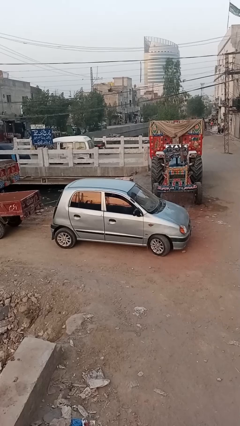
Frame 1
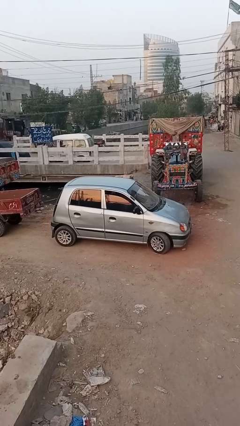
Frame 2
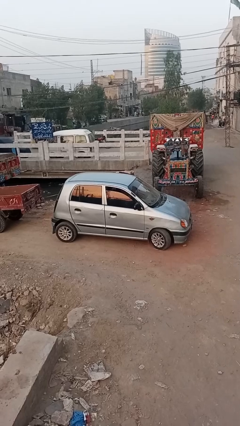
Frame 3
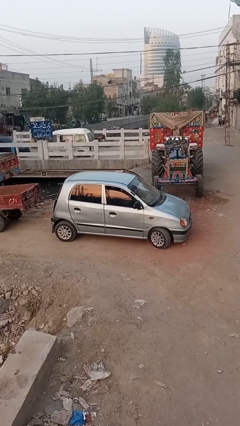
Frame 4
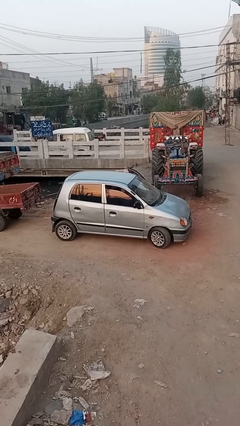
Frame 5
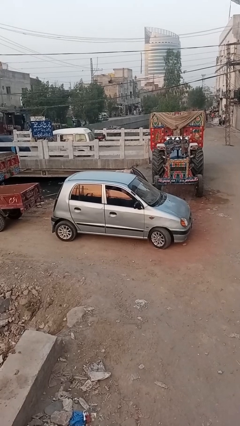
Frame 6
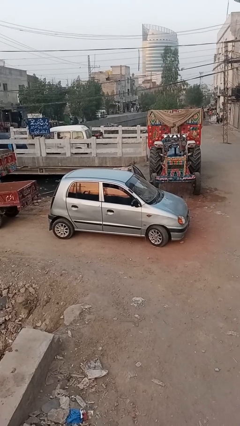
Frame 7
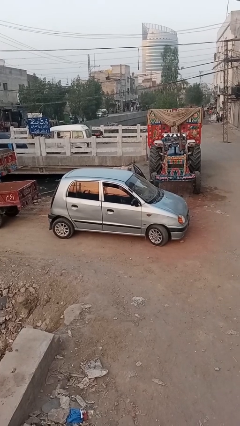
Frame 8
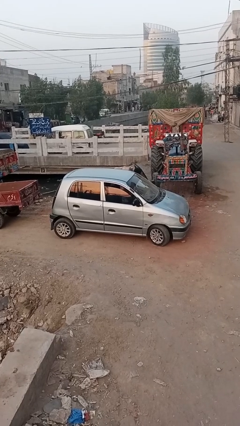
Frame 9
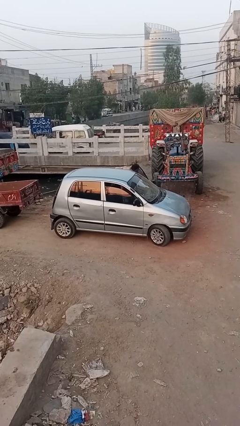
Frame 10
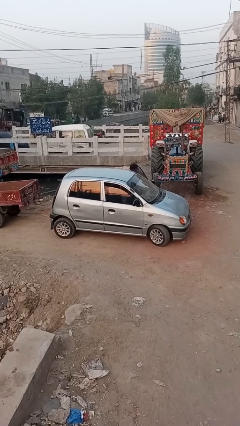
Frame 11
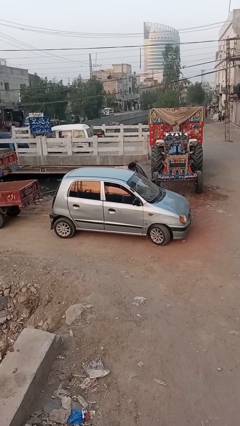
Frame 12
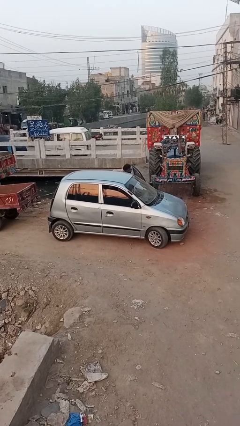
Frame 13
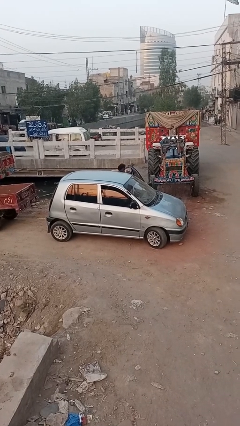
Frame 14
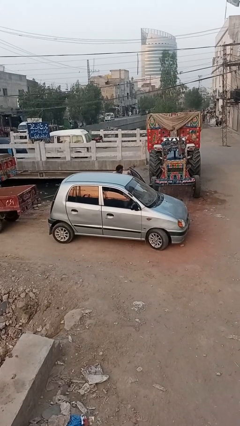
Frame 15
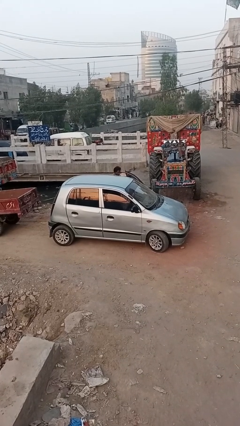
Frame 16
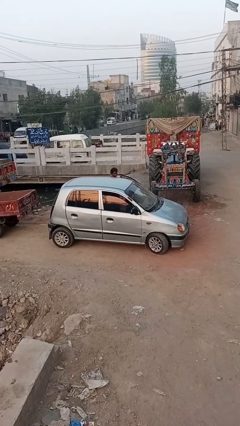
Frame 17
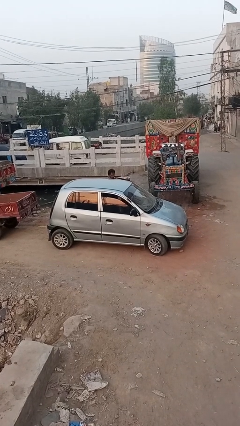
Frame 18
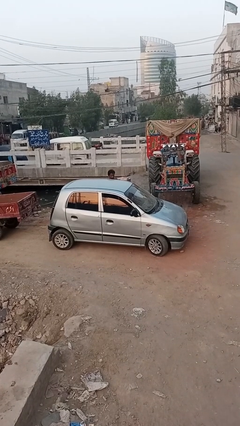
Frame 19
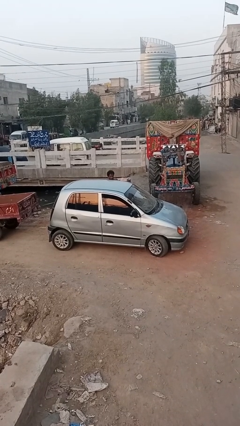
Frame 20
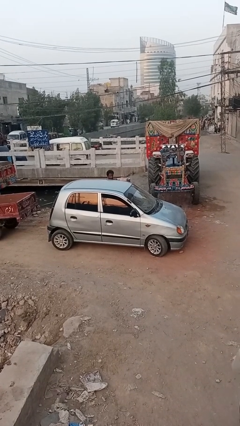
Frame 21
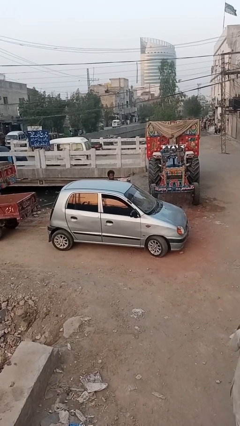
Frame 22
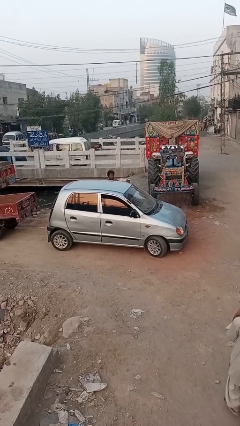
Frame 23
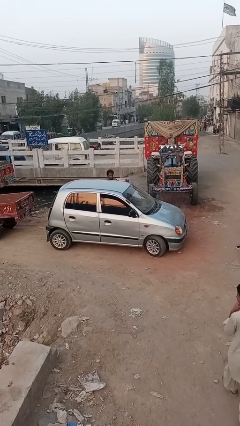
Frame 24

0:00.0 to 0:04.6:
car drops off person

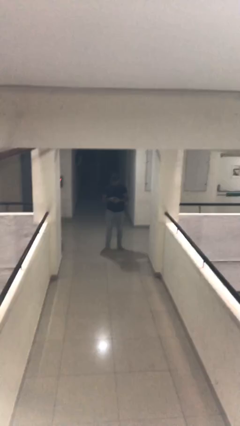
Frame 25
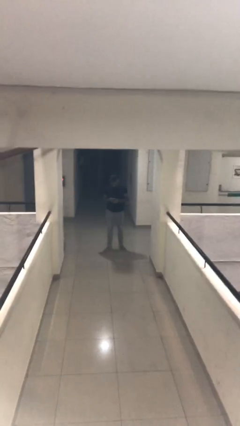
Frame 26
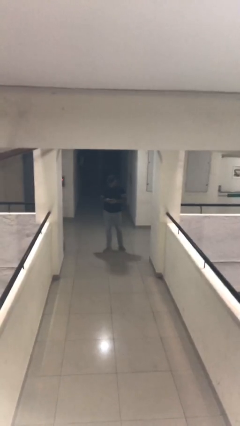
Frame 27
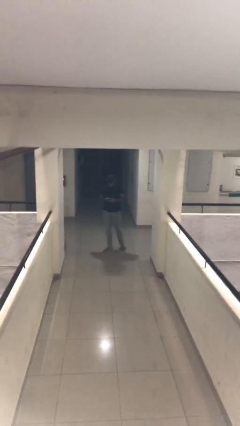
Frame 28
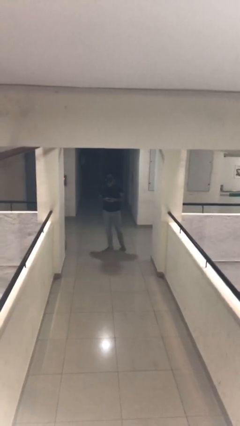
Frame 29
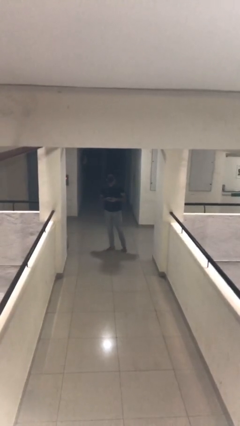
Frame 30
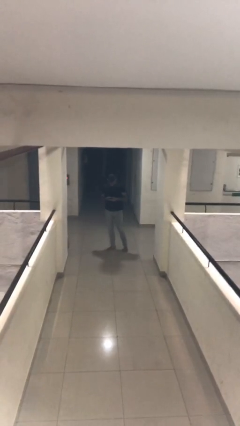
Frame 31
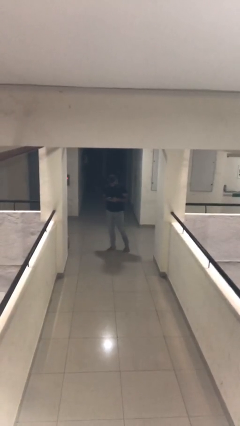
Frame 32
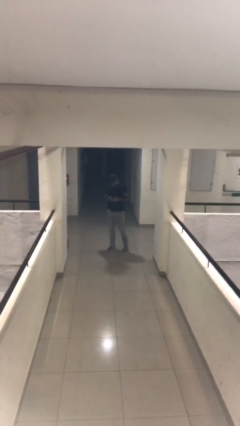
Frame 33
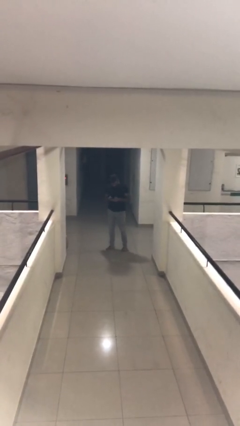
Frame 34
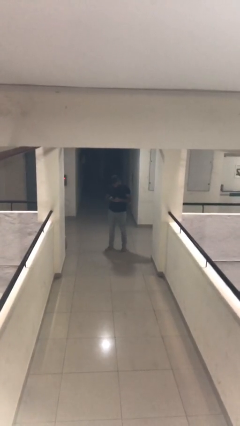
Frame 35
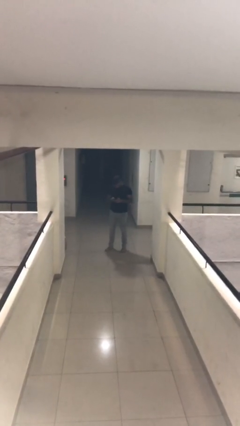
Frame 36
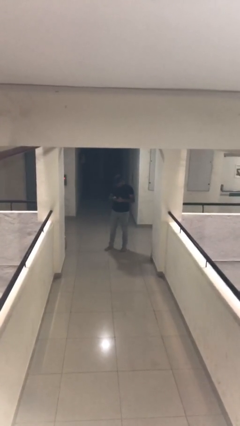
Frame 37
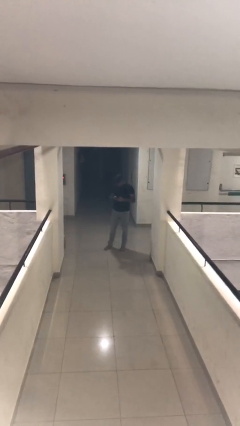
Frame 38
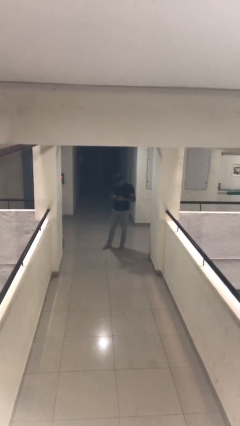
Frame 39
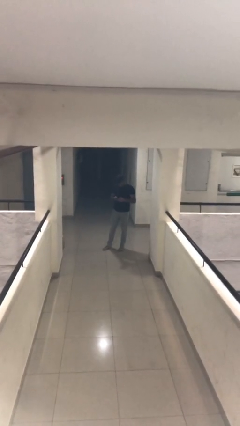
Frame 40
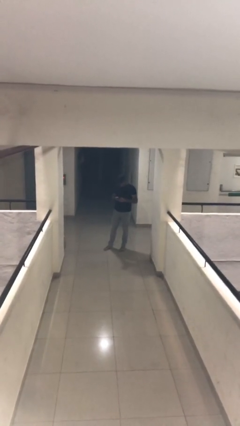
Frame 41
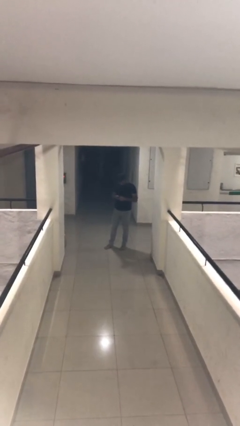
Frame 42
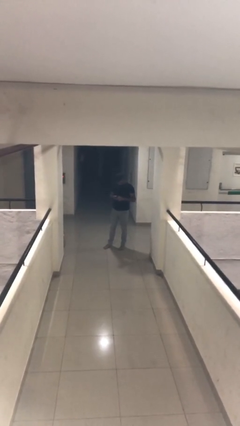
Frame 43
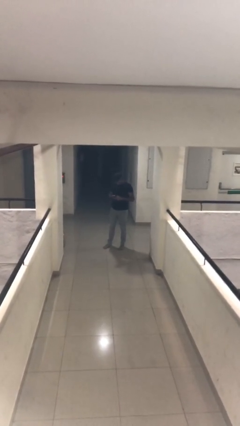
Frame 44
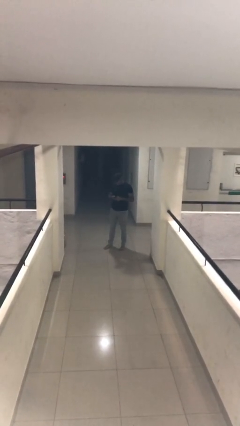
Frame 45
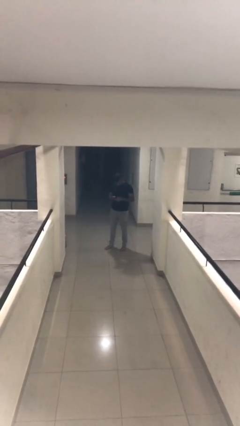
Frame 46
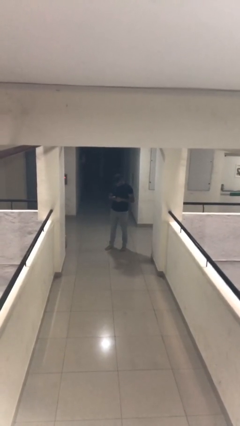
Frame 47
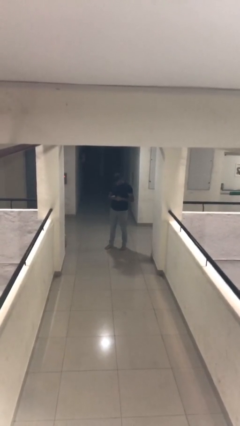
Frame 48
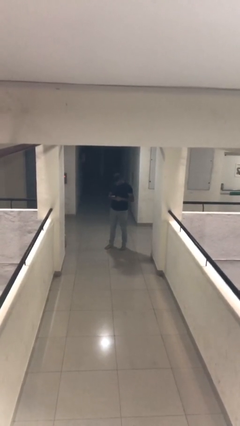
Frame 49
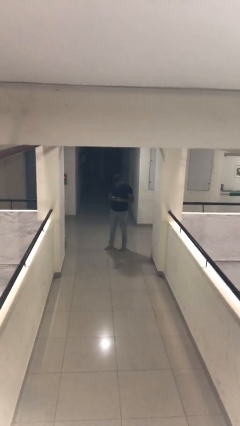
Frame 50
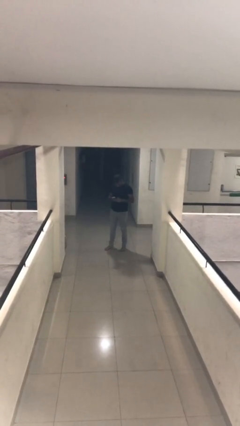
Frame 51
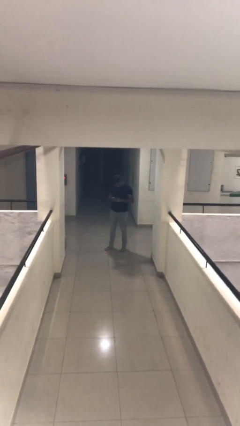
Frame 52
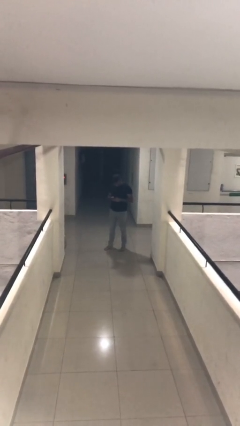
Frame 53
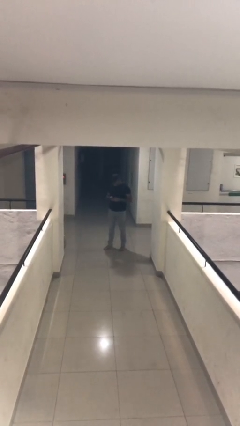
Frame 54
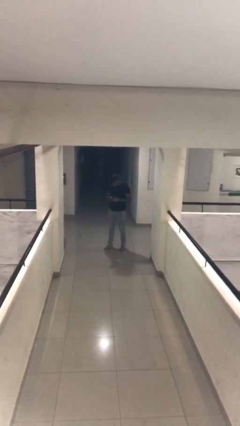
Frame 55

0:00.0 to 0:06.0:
person texts on phone

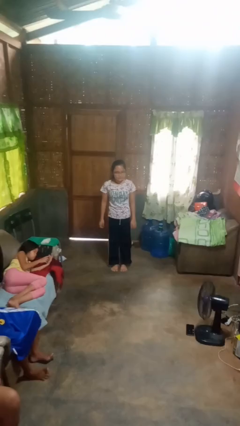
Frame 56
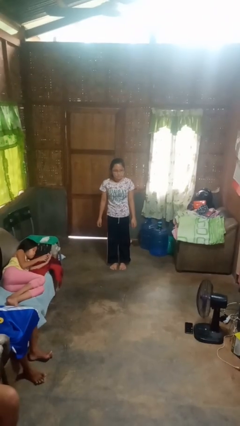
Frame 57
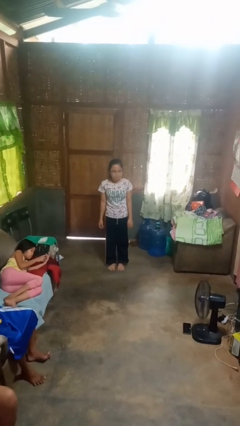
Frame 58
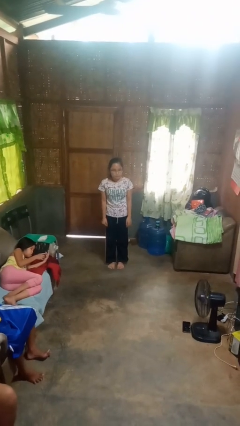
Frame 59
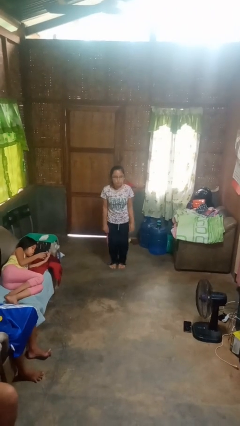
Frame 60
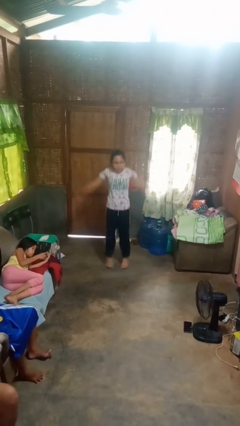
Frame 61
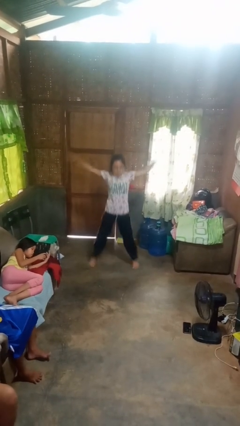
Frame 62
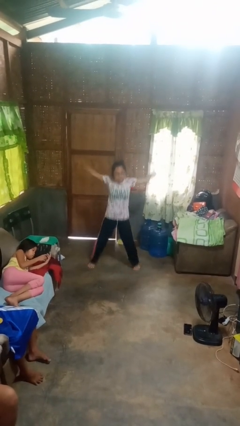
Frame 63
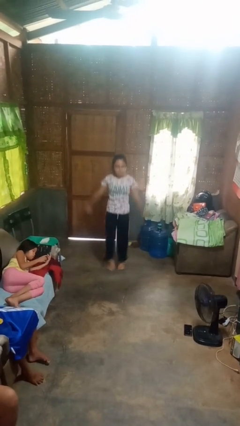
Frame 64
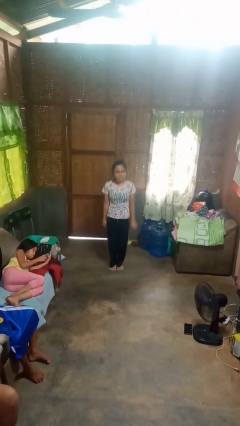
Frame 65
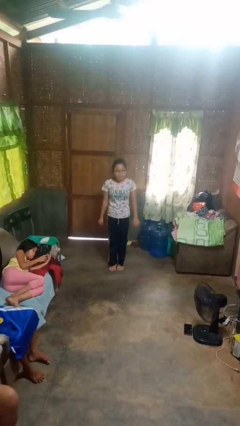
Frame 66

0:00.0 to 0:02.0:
person exercises with jumping jacks

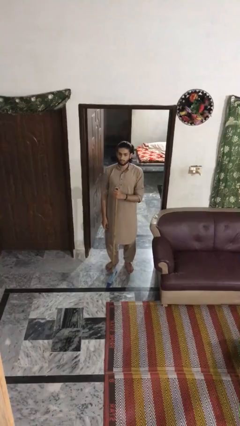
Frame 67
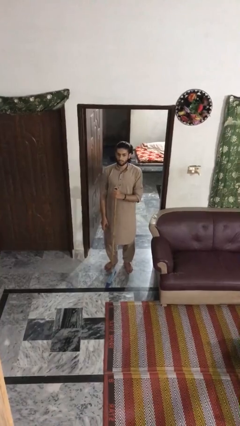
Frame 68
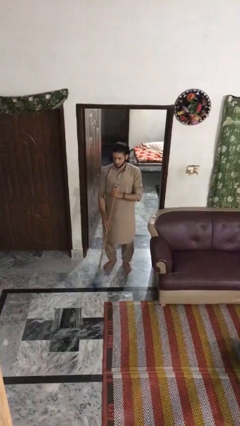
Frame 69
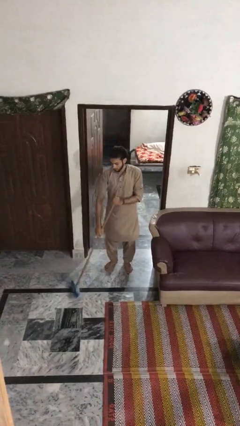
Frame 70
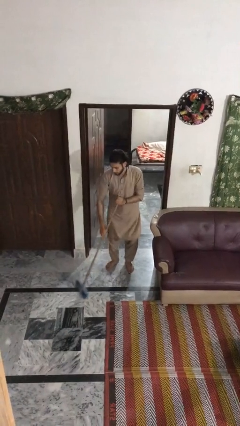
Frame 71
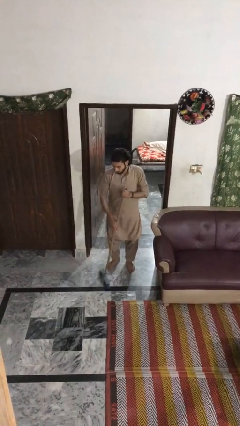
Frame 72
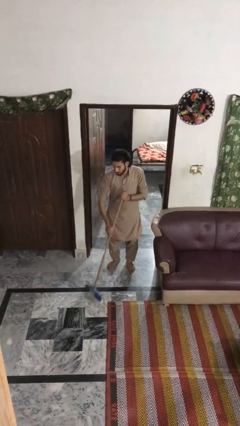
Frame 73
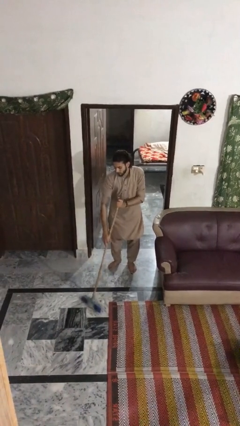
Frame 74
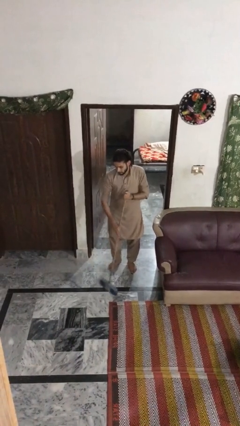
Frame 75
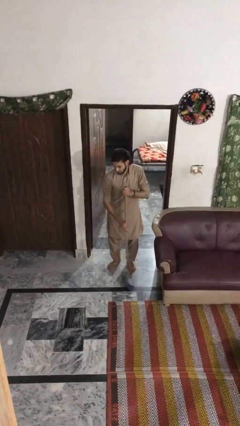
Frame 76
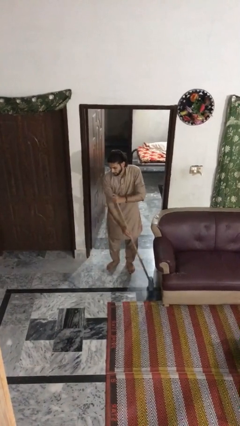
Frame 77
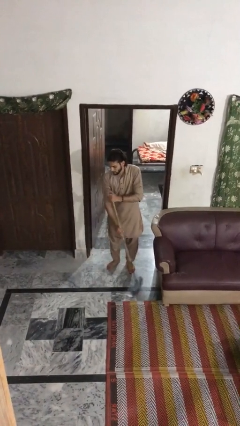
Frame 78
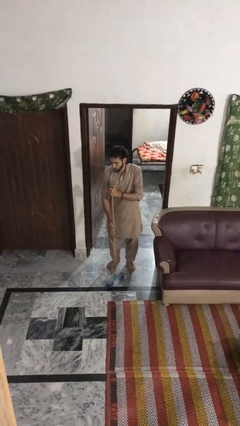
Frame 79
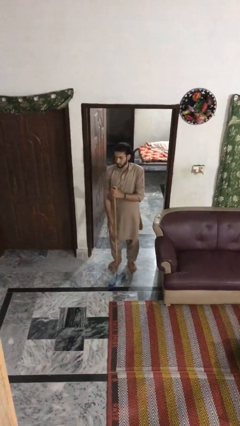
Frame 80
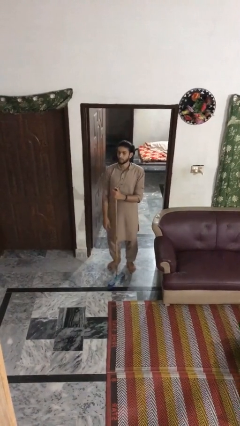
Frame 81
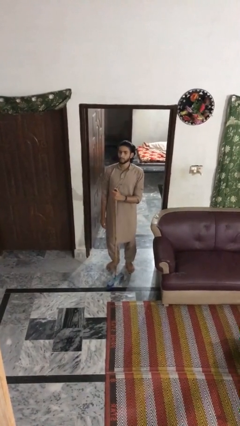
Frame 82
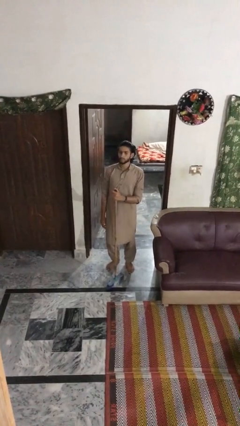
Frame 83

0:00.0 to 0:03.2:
person sweeps floor

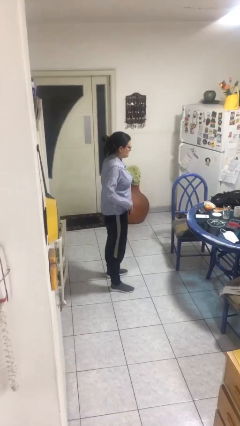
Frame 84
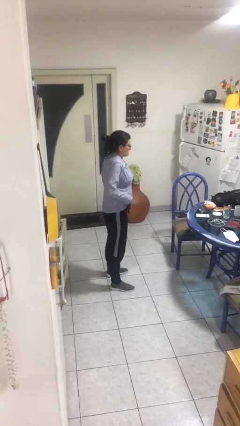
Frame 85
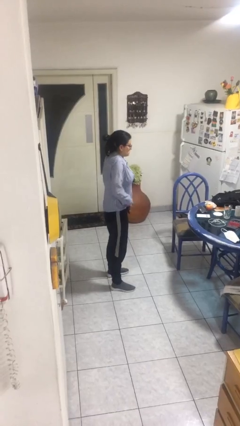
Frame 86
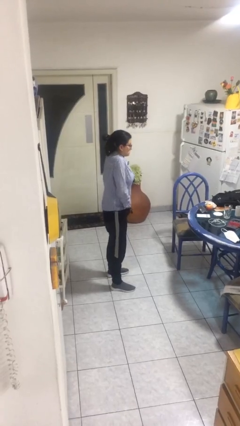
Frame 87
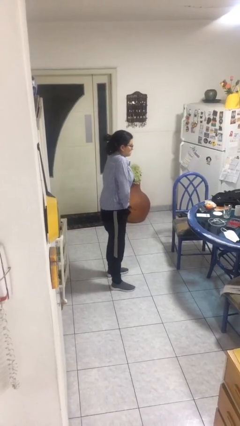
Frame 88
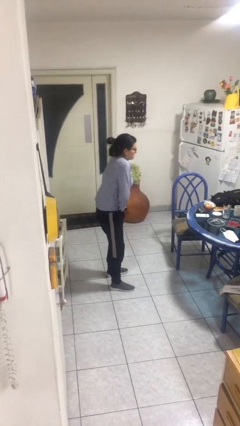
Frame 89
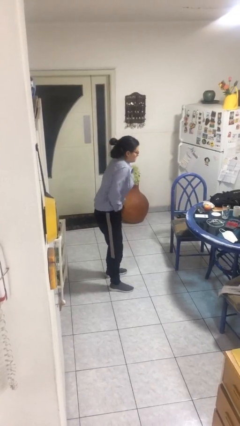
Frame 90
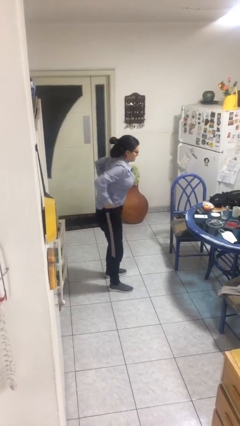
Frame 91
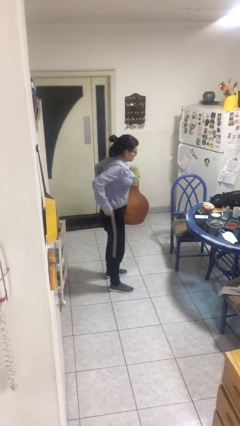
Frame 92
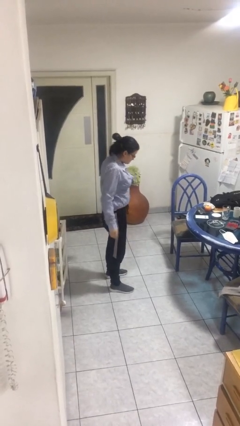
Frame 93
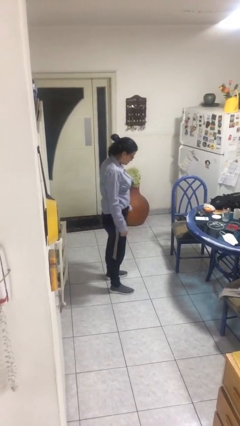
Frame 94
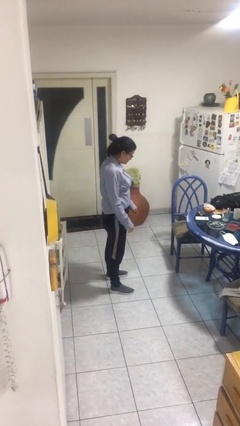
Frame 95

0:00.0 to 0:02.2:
person tucks in shirt
